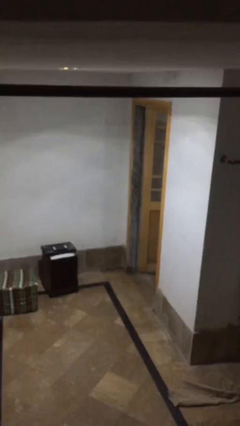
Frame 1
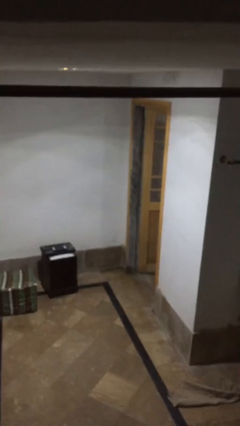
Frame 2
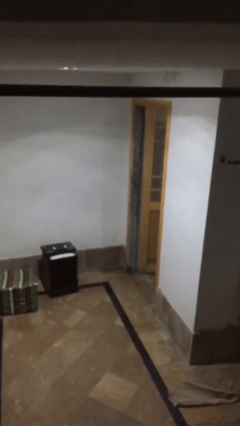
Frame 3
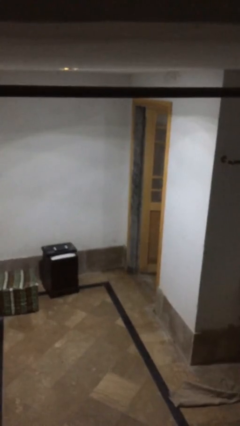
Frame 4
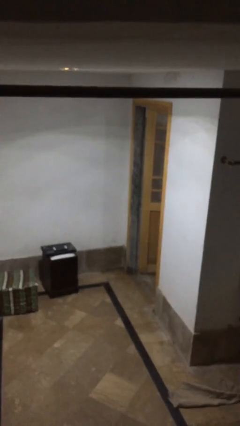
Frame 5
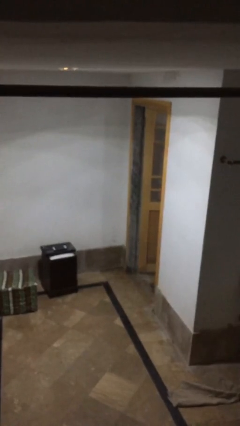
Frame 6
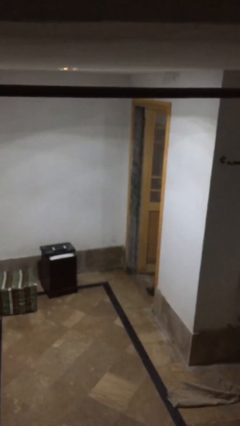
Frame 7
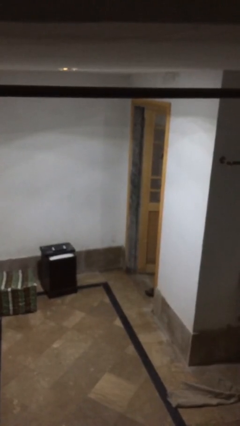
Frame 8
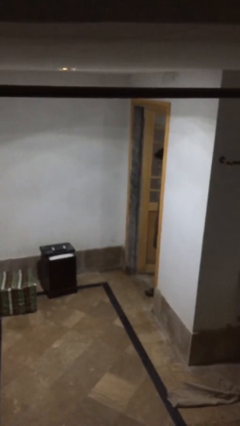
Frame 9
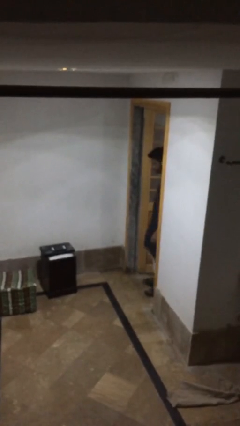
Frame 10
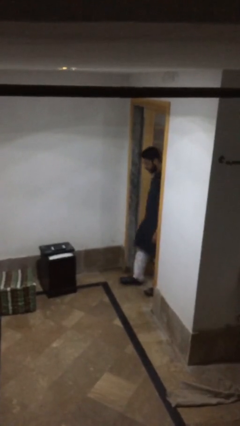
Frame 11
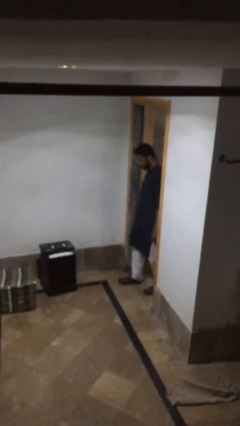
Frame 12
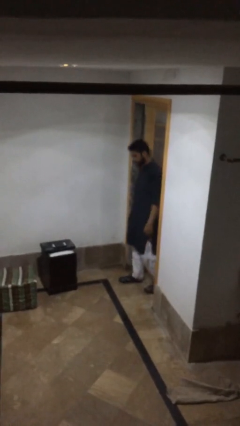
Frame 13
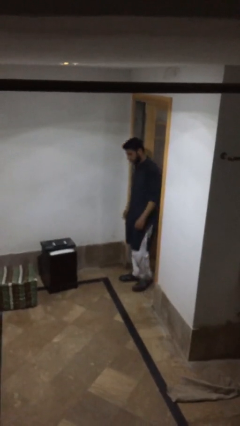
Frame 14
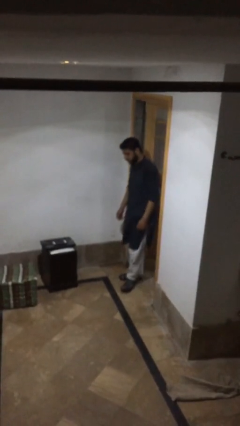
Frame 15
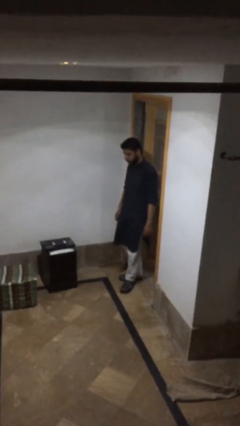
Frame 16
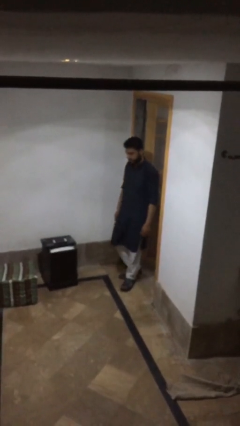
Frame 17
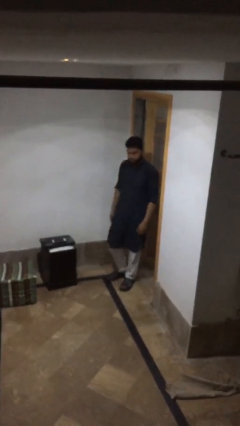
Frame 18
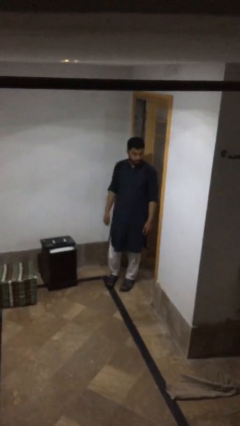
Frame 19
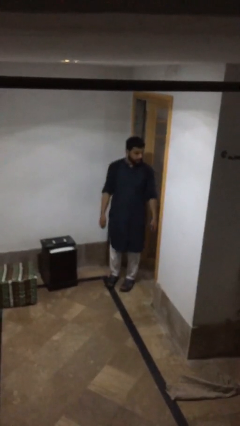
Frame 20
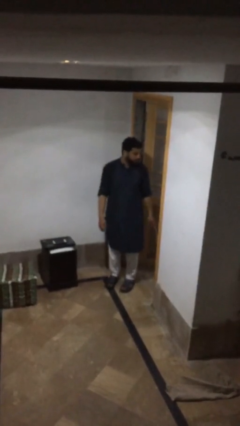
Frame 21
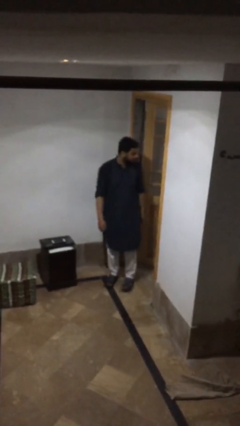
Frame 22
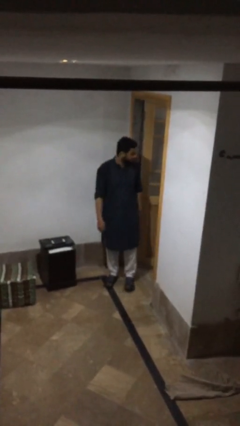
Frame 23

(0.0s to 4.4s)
person enters scene through structure

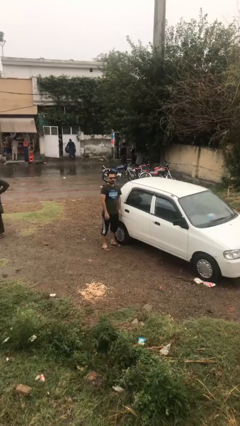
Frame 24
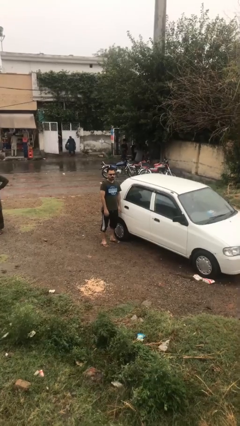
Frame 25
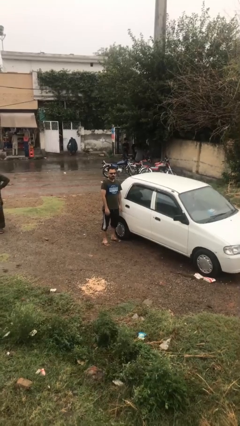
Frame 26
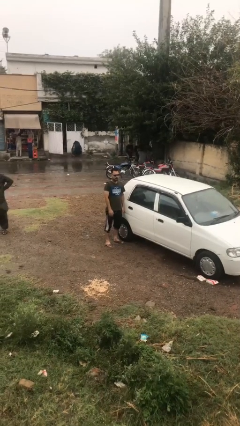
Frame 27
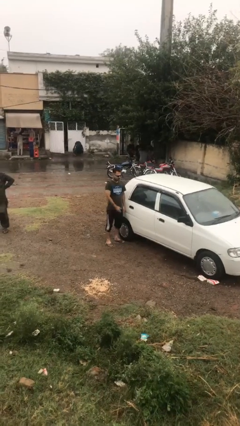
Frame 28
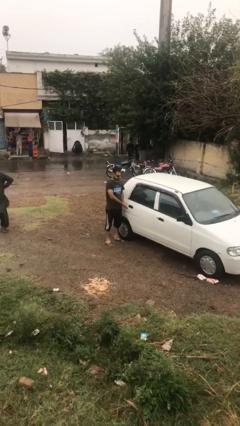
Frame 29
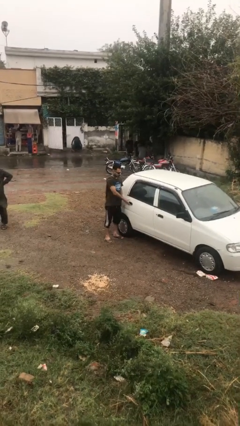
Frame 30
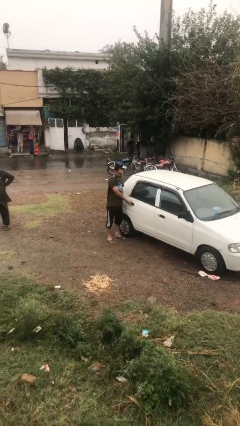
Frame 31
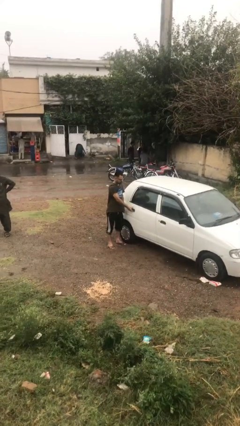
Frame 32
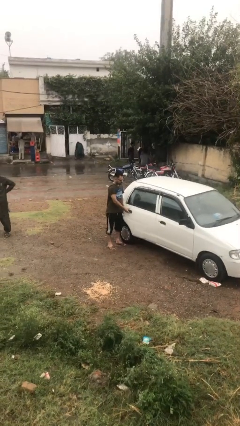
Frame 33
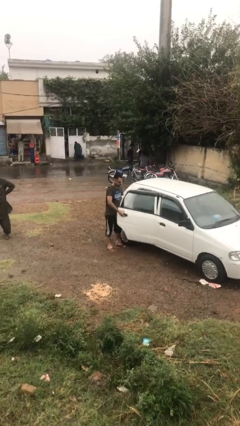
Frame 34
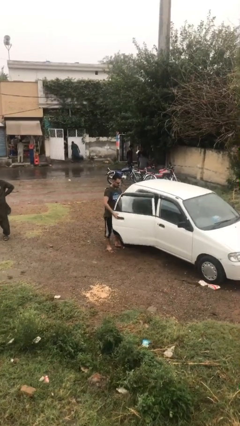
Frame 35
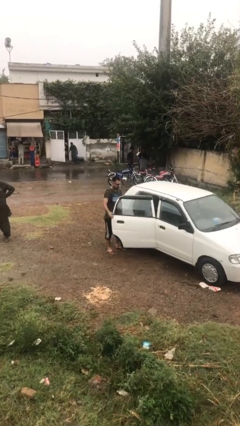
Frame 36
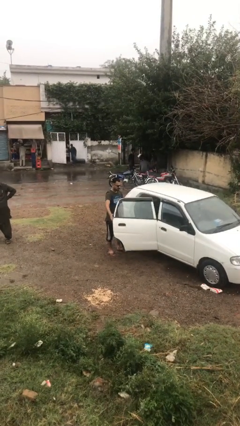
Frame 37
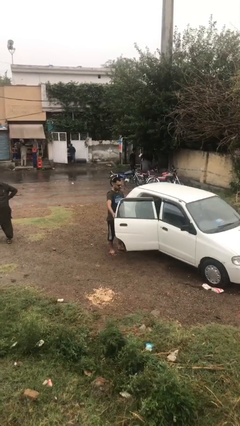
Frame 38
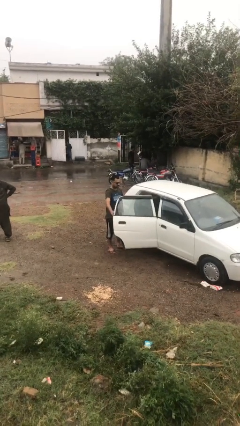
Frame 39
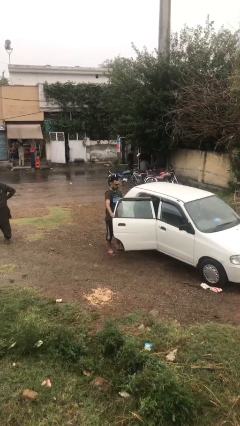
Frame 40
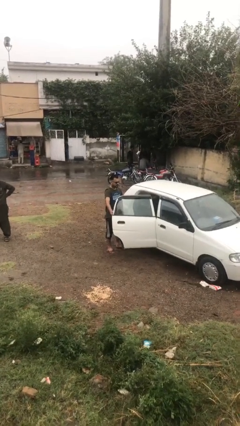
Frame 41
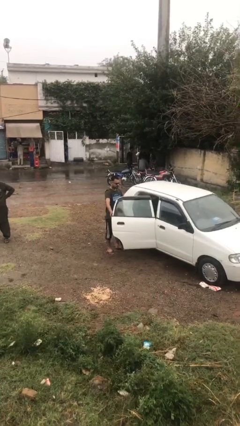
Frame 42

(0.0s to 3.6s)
person opens car door

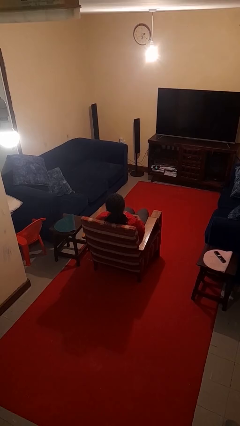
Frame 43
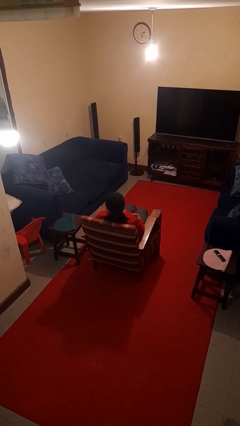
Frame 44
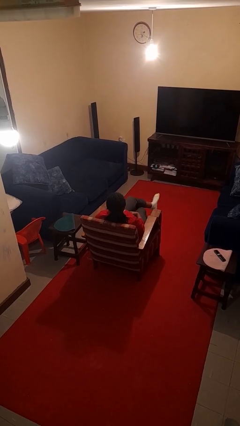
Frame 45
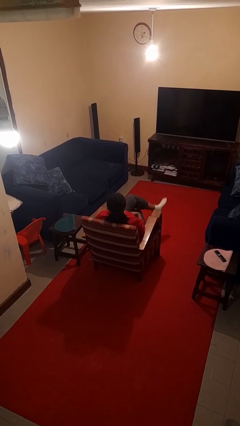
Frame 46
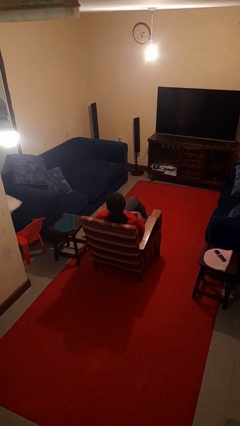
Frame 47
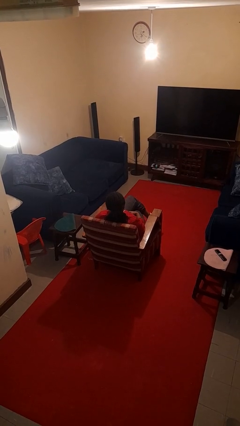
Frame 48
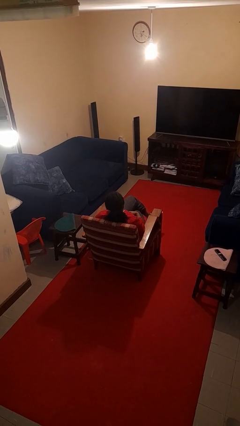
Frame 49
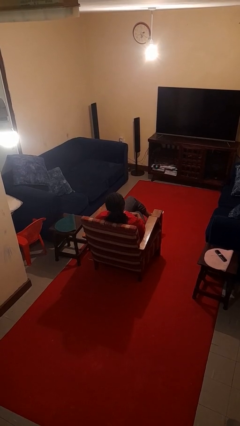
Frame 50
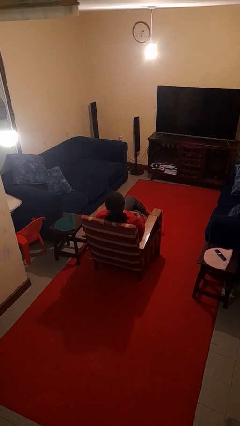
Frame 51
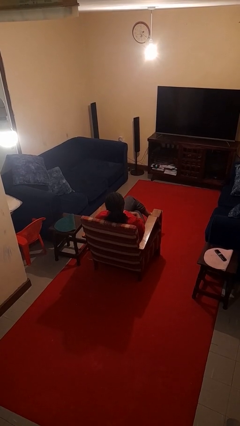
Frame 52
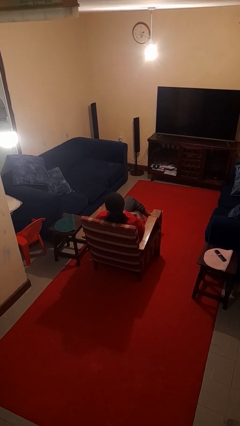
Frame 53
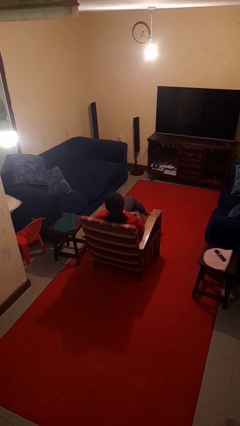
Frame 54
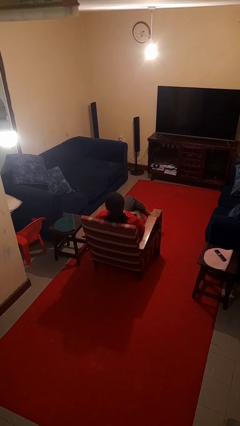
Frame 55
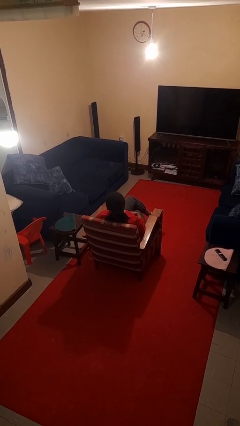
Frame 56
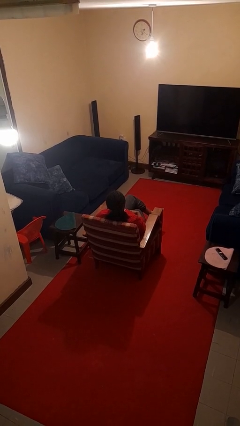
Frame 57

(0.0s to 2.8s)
person crosses legs

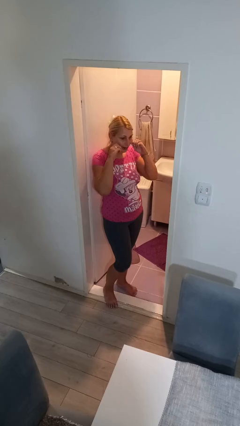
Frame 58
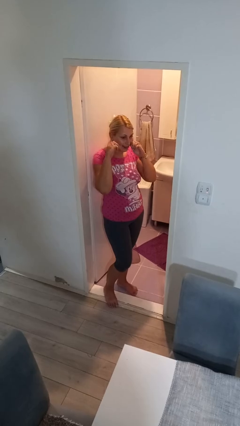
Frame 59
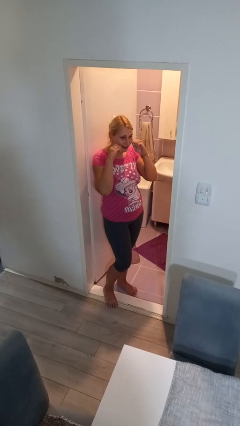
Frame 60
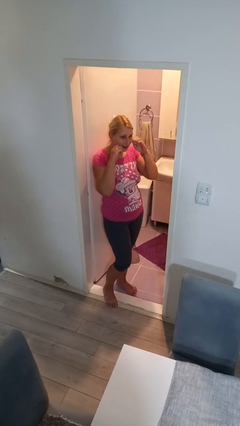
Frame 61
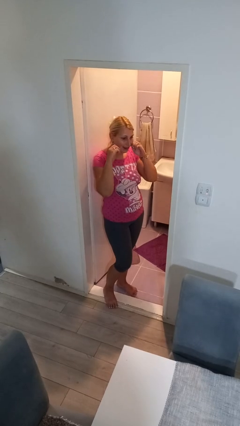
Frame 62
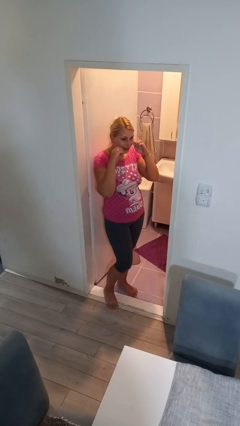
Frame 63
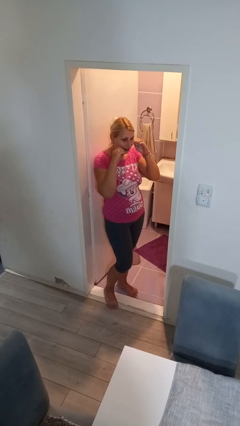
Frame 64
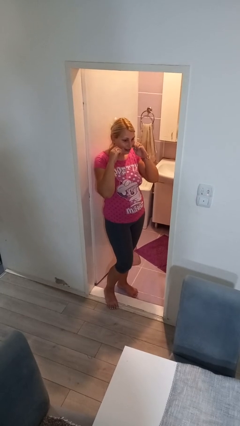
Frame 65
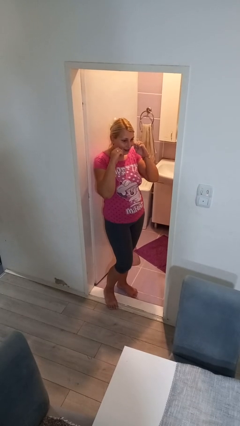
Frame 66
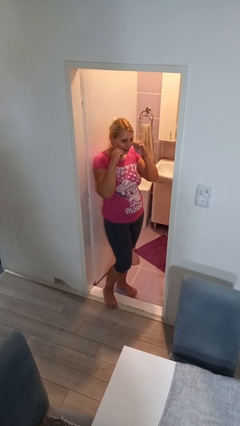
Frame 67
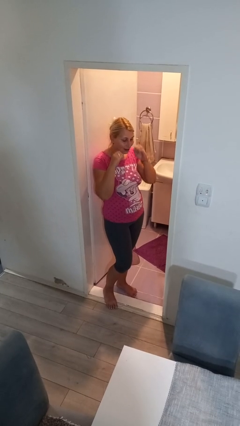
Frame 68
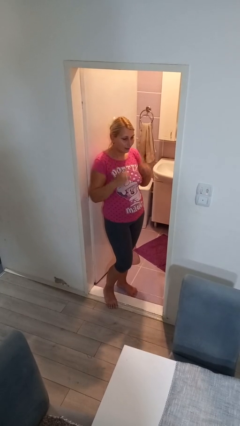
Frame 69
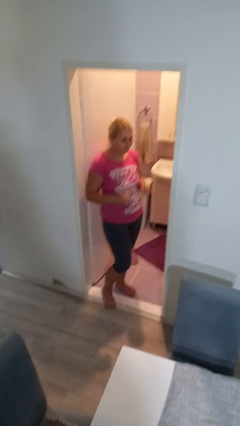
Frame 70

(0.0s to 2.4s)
person flosses

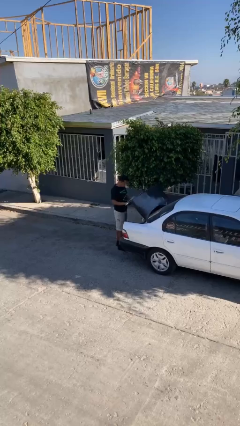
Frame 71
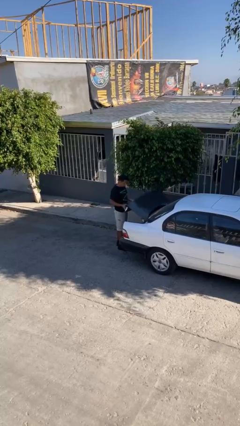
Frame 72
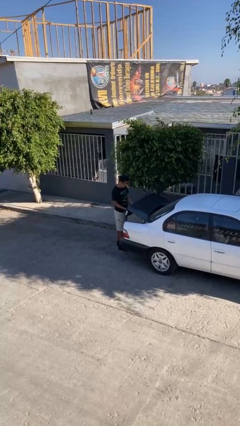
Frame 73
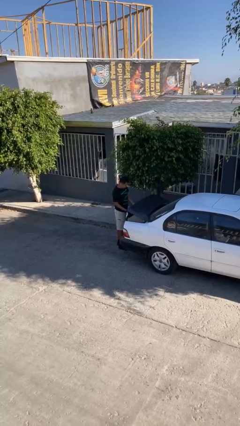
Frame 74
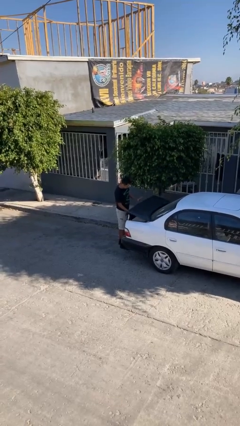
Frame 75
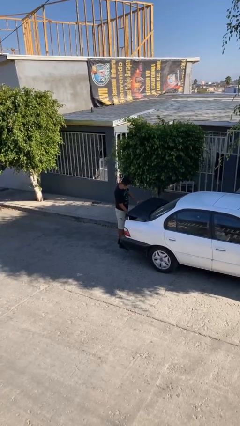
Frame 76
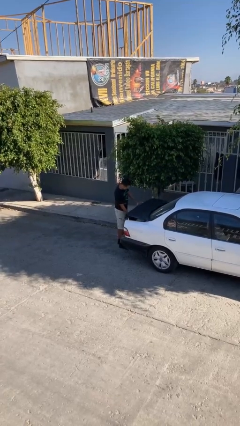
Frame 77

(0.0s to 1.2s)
person closes car trunk

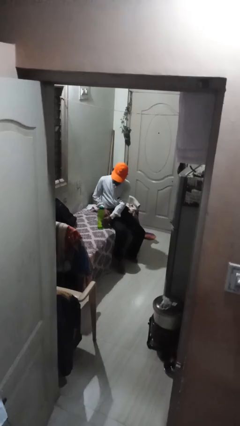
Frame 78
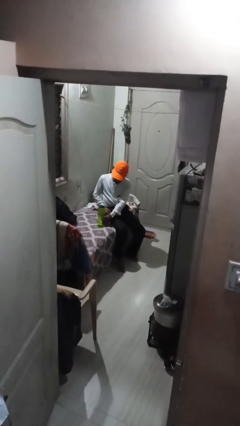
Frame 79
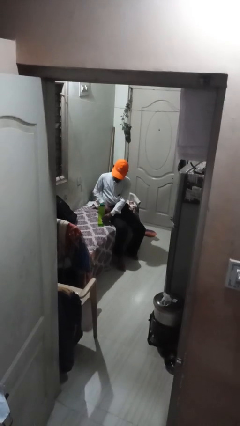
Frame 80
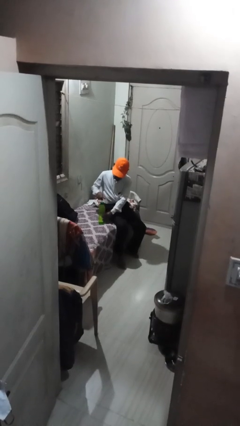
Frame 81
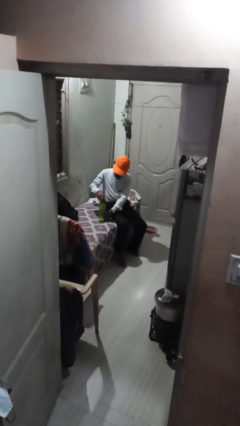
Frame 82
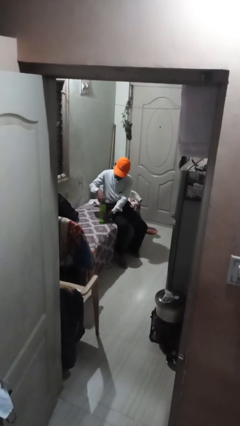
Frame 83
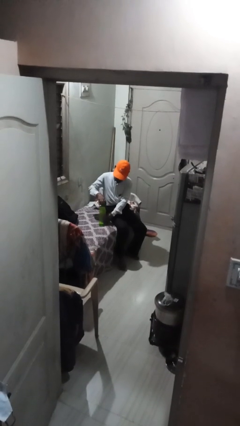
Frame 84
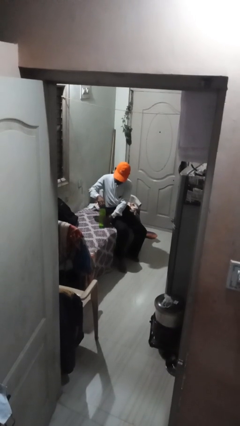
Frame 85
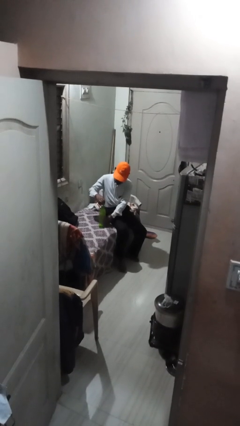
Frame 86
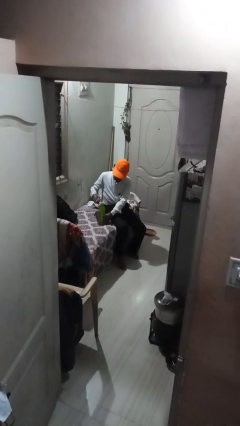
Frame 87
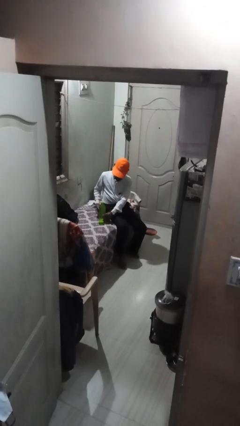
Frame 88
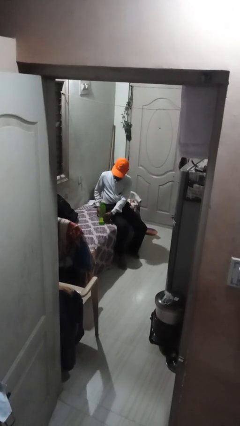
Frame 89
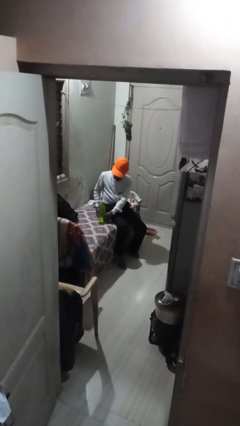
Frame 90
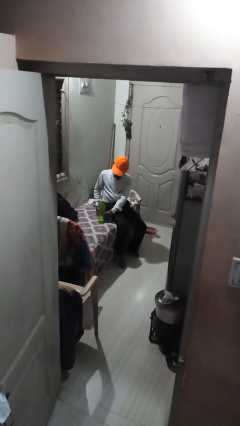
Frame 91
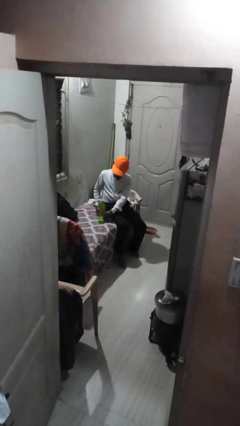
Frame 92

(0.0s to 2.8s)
person unscrews lid from bottle
